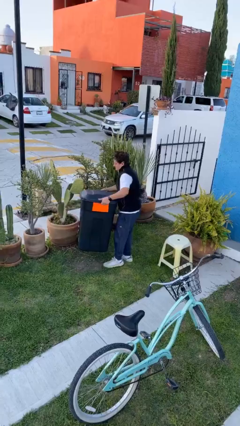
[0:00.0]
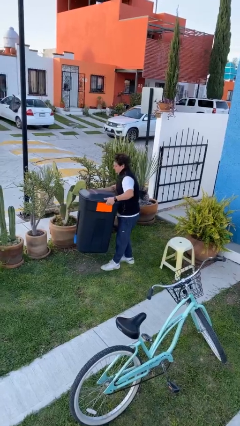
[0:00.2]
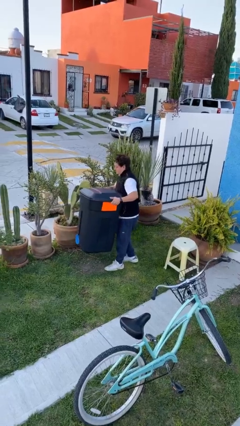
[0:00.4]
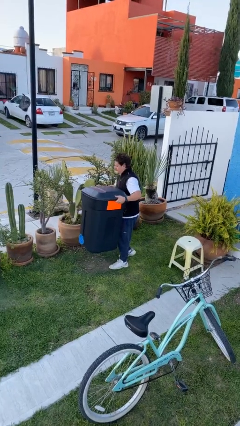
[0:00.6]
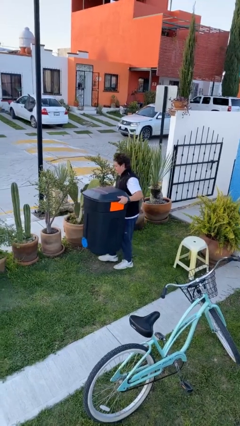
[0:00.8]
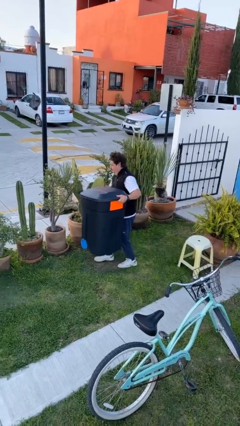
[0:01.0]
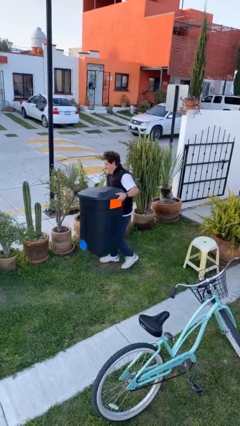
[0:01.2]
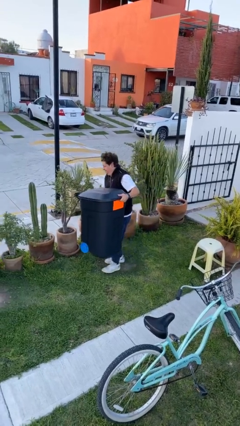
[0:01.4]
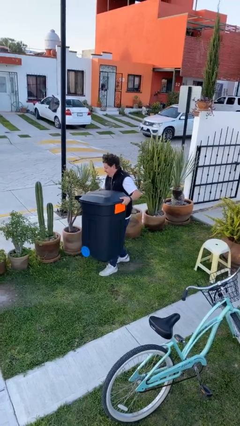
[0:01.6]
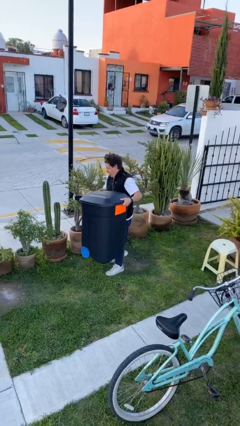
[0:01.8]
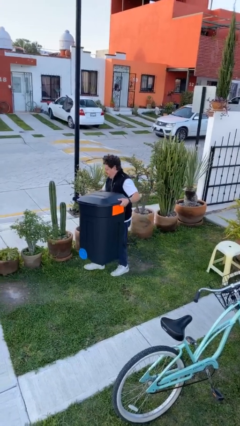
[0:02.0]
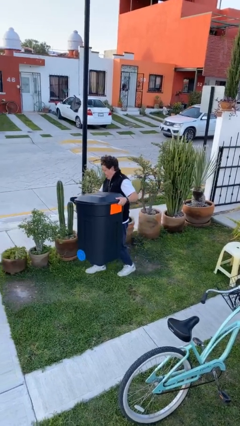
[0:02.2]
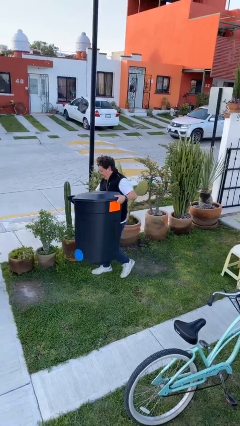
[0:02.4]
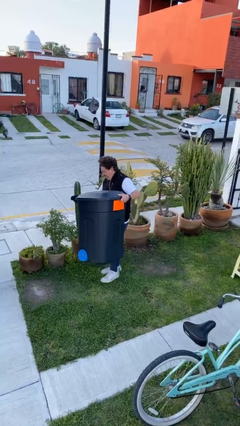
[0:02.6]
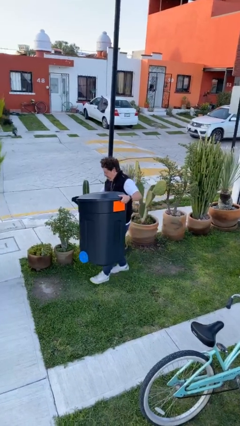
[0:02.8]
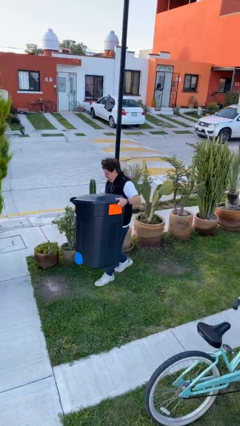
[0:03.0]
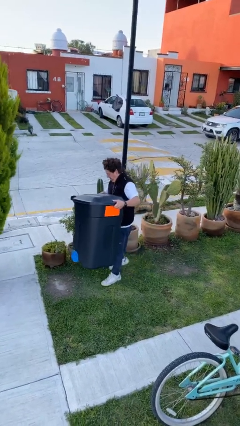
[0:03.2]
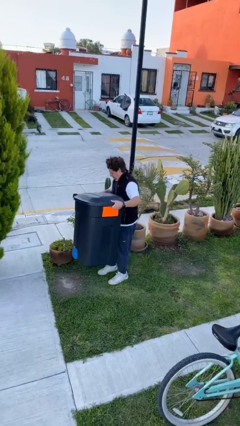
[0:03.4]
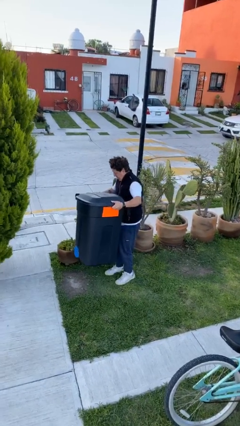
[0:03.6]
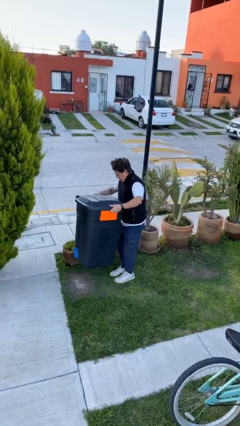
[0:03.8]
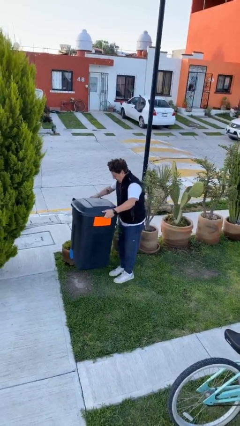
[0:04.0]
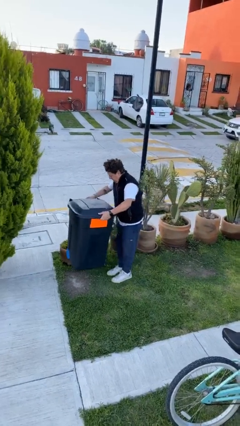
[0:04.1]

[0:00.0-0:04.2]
person carries heavy object

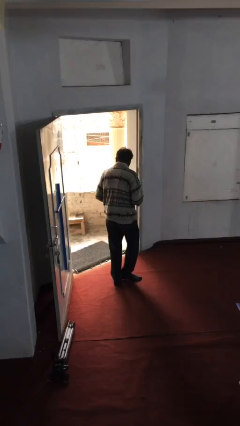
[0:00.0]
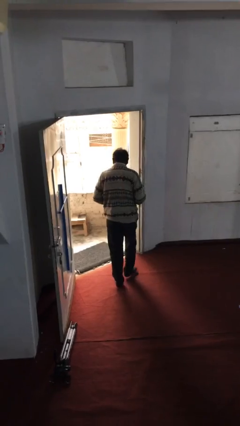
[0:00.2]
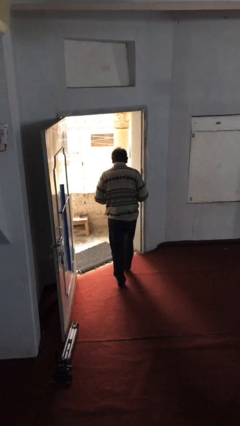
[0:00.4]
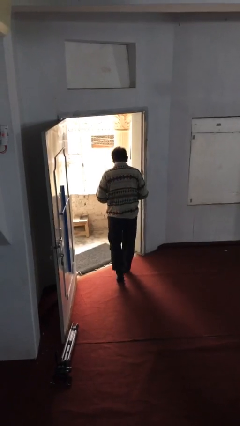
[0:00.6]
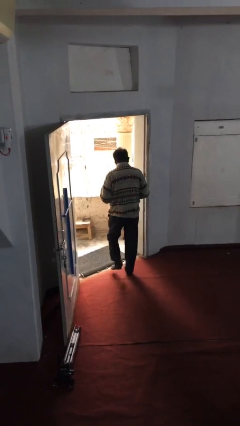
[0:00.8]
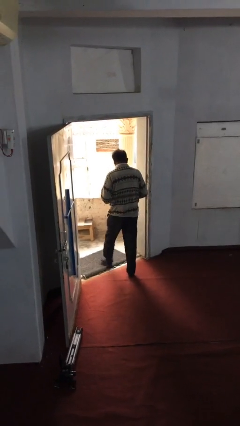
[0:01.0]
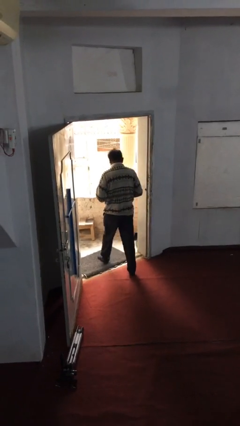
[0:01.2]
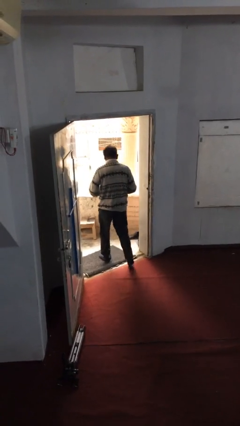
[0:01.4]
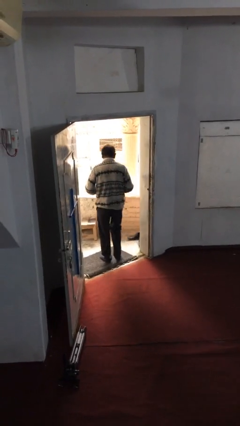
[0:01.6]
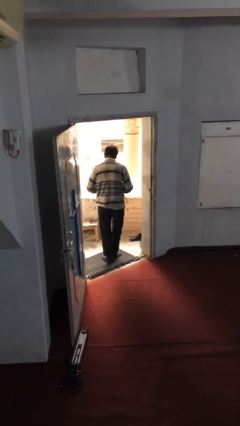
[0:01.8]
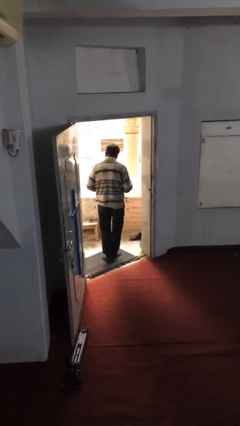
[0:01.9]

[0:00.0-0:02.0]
person exits scene through structure

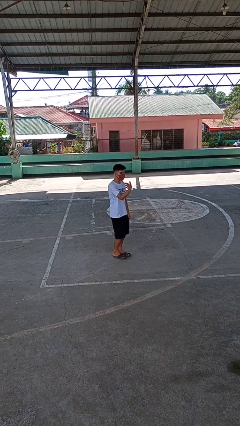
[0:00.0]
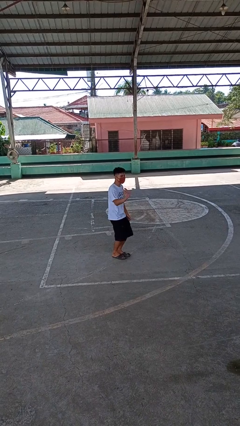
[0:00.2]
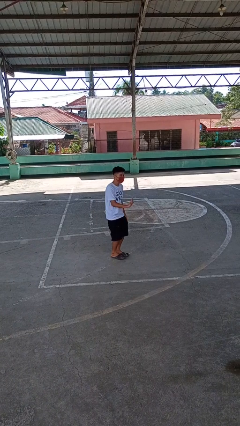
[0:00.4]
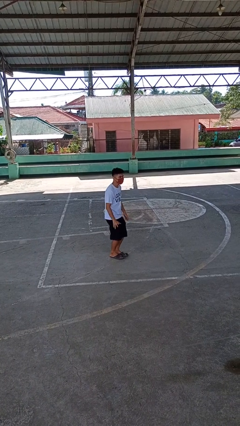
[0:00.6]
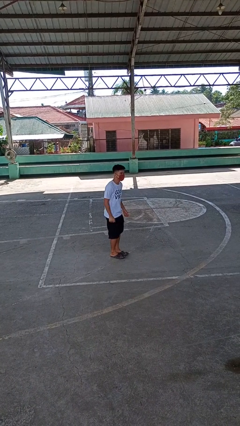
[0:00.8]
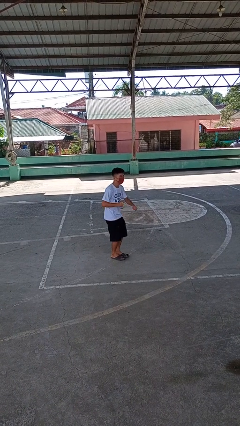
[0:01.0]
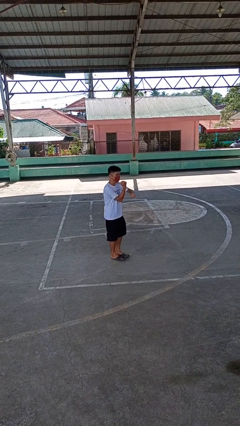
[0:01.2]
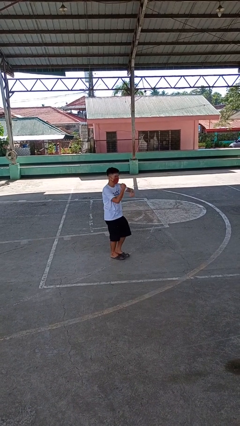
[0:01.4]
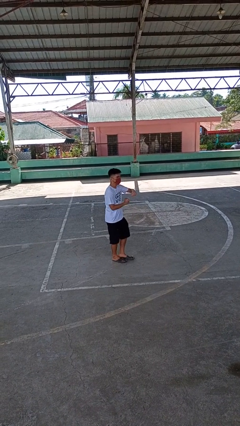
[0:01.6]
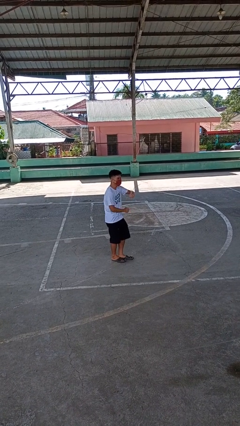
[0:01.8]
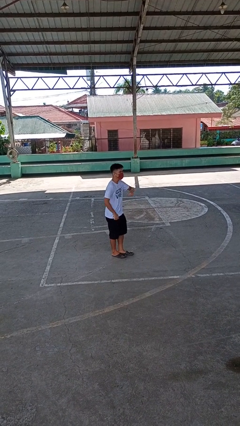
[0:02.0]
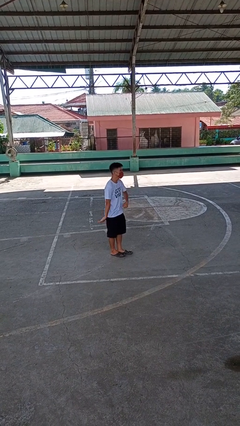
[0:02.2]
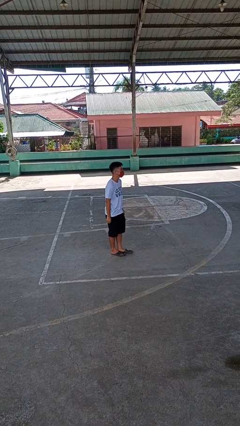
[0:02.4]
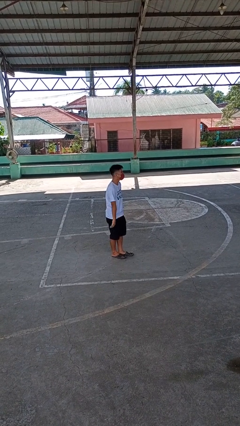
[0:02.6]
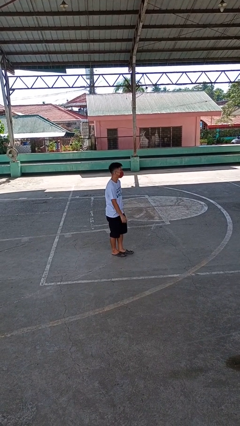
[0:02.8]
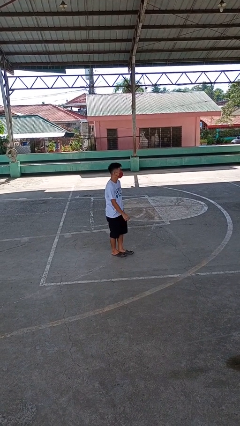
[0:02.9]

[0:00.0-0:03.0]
person dances in place

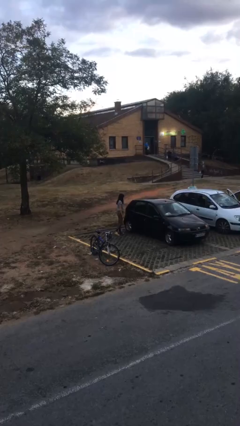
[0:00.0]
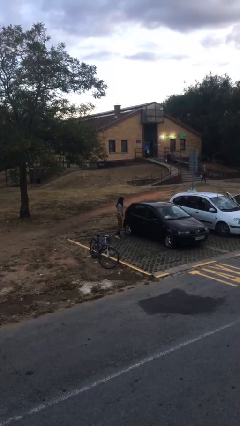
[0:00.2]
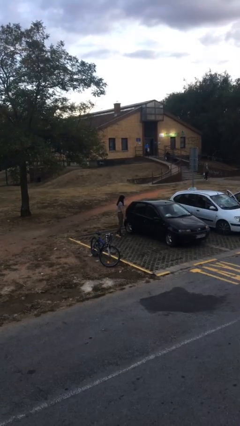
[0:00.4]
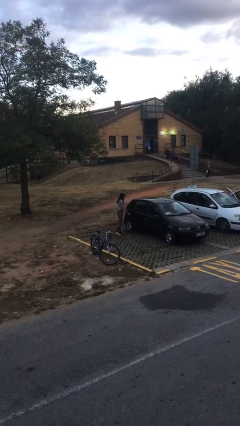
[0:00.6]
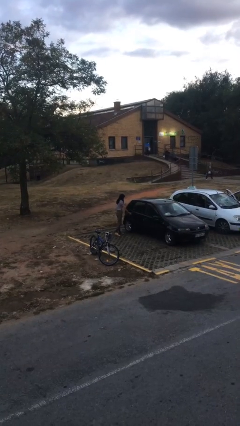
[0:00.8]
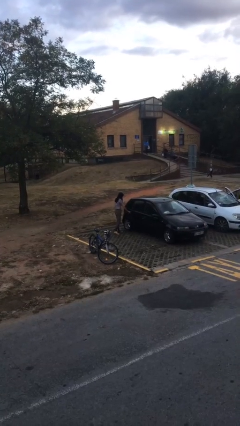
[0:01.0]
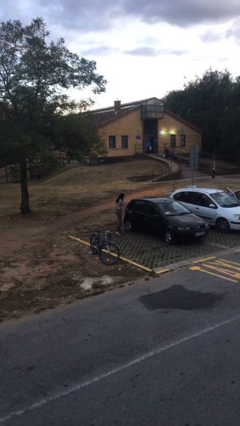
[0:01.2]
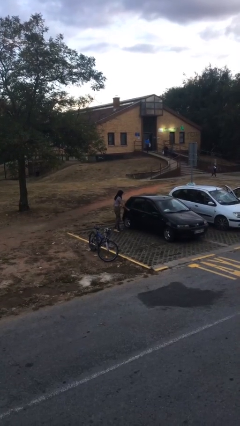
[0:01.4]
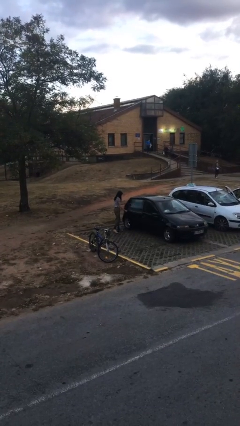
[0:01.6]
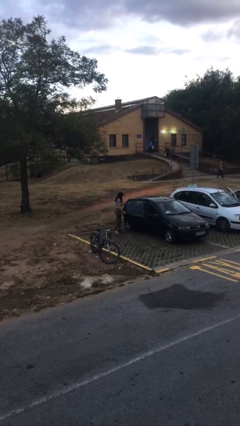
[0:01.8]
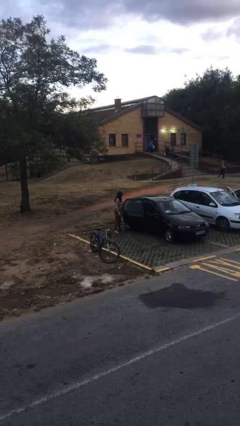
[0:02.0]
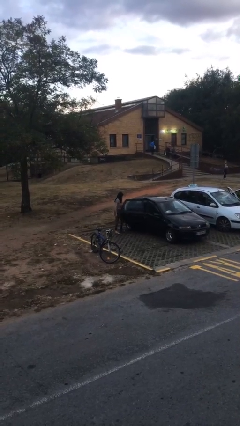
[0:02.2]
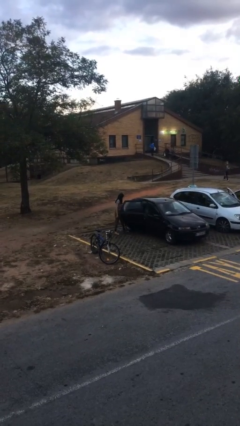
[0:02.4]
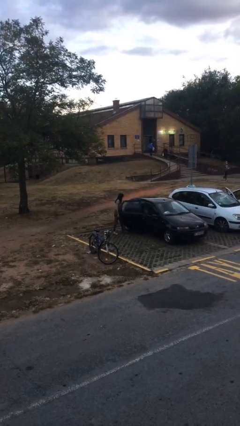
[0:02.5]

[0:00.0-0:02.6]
person opens car door

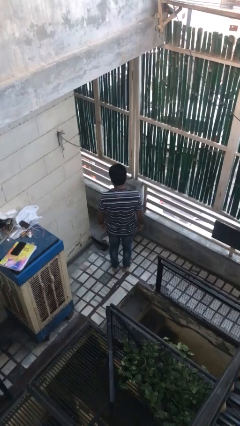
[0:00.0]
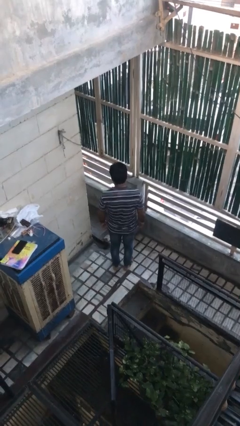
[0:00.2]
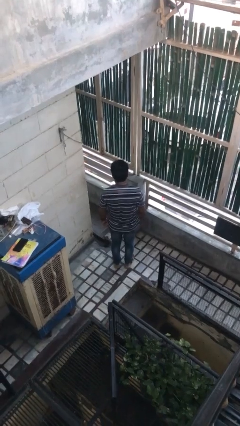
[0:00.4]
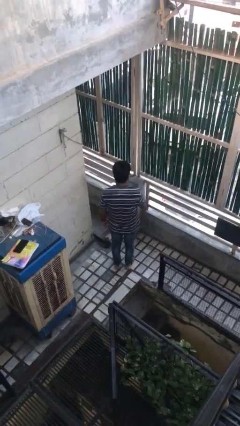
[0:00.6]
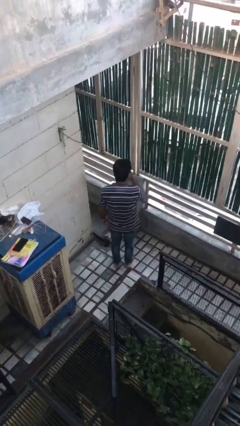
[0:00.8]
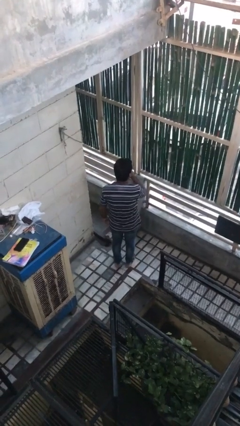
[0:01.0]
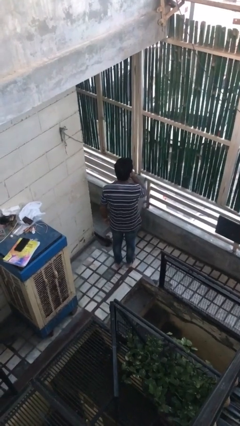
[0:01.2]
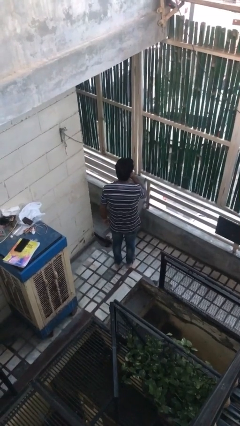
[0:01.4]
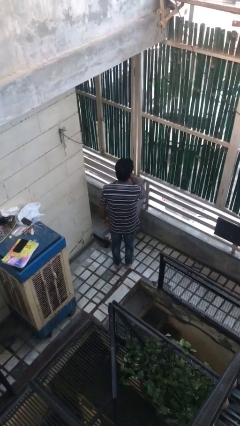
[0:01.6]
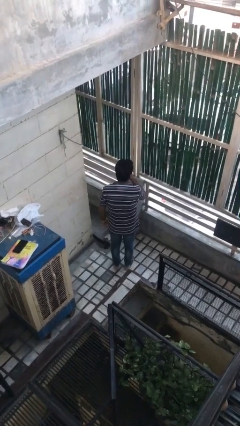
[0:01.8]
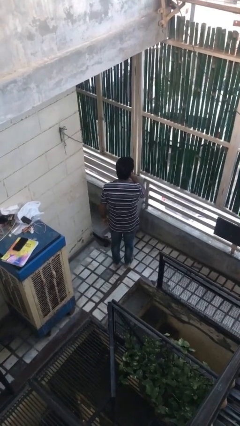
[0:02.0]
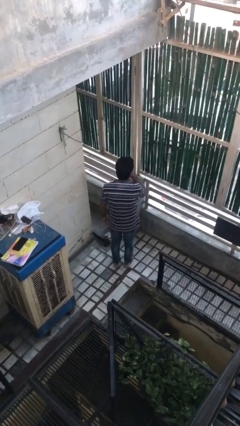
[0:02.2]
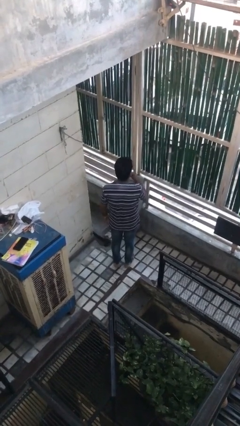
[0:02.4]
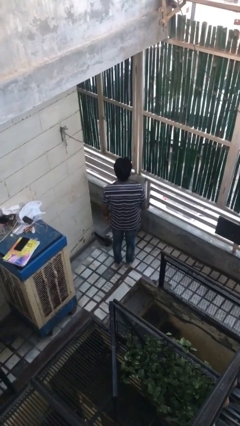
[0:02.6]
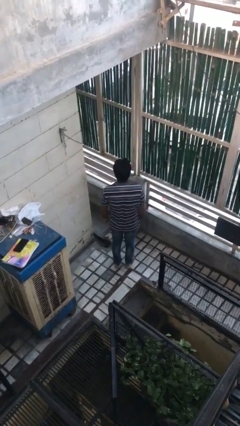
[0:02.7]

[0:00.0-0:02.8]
person gestures be quiet

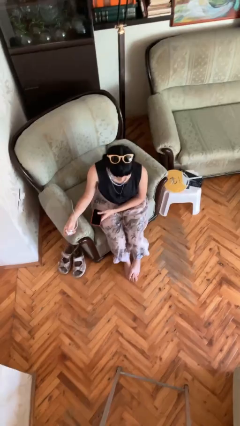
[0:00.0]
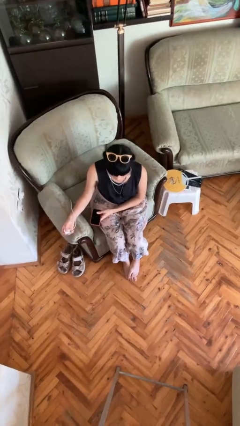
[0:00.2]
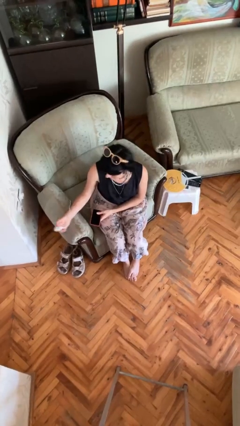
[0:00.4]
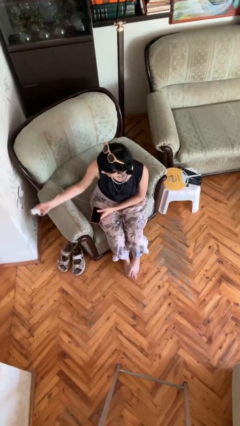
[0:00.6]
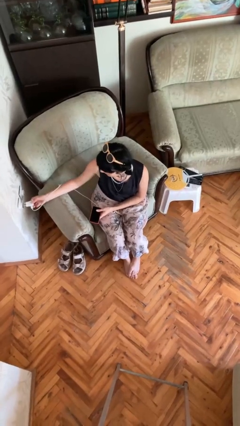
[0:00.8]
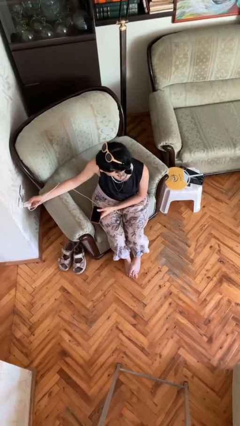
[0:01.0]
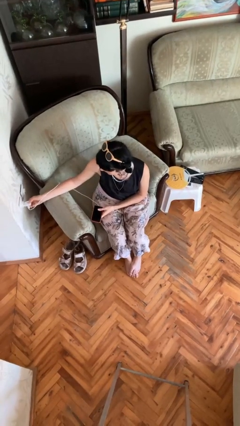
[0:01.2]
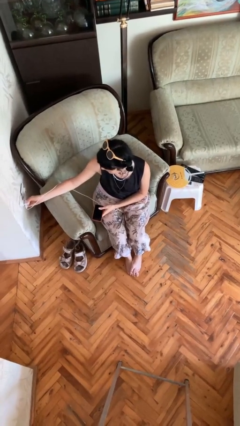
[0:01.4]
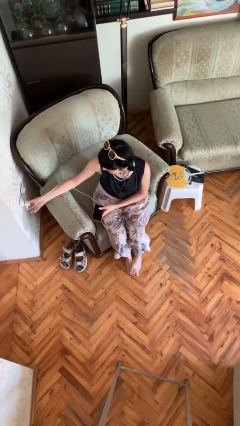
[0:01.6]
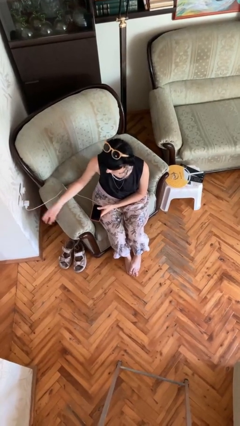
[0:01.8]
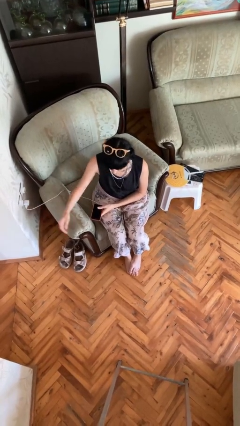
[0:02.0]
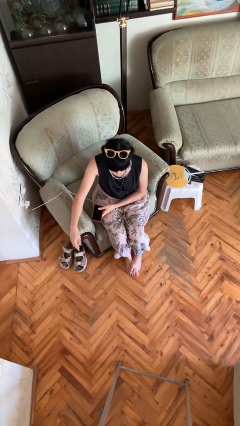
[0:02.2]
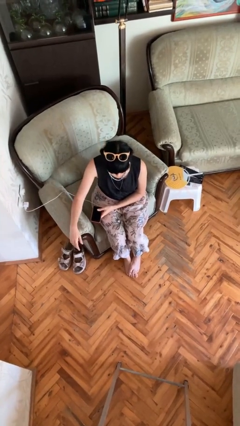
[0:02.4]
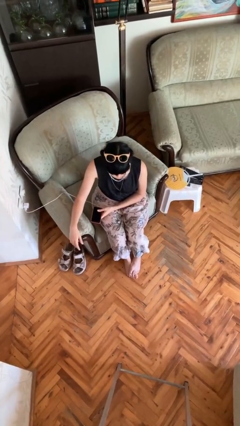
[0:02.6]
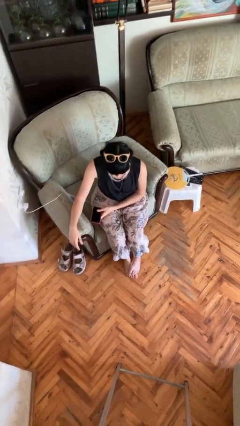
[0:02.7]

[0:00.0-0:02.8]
person plugs into electrical socket
